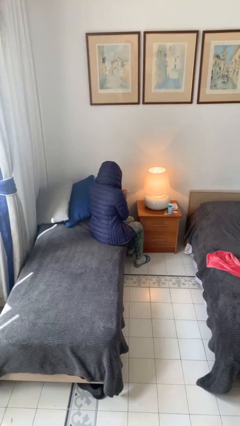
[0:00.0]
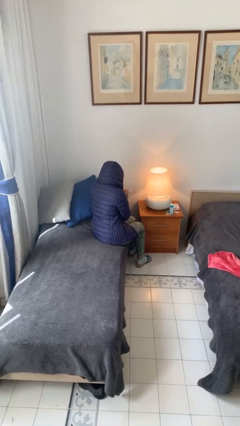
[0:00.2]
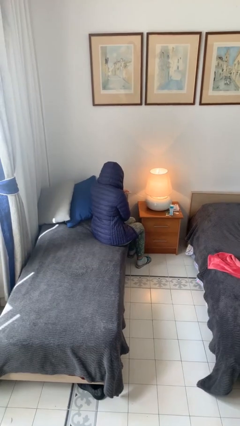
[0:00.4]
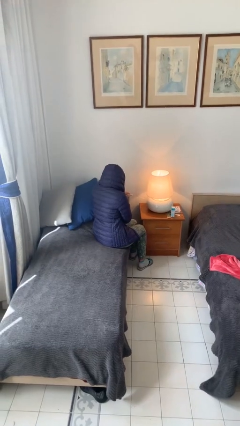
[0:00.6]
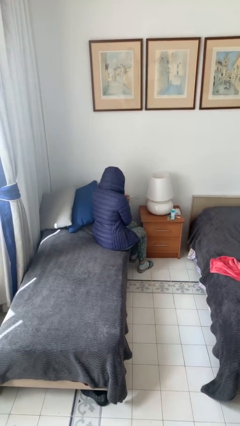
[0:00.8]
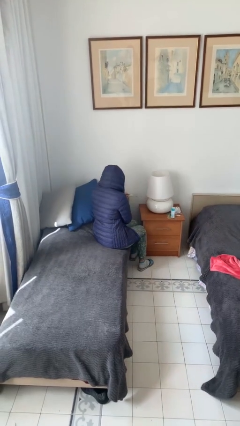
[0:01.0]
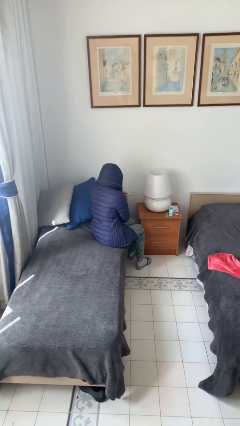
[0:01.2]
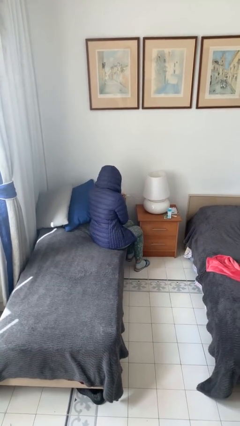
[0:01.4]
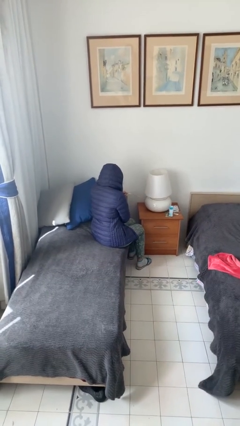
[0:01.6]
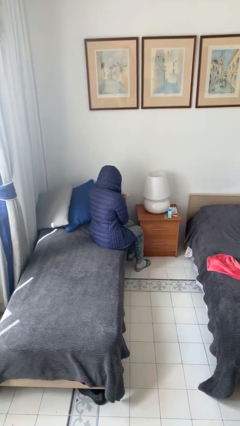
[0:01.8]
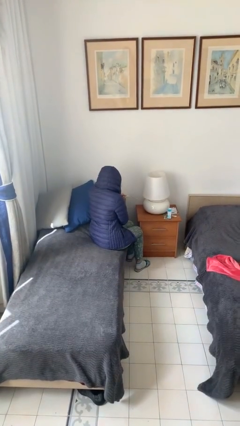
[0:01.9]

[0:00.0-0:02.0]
person turns off lamp

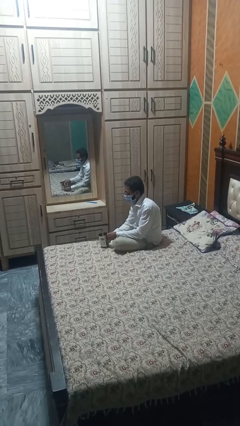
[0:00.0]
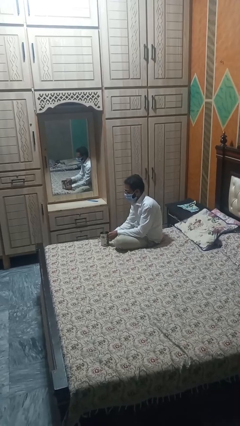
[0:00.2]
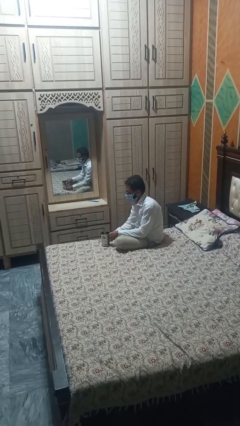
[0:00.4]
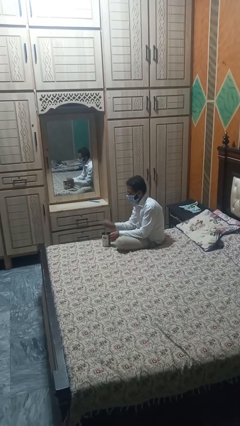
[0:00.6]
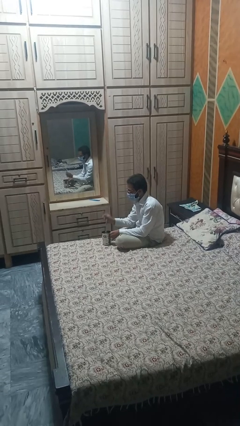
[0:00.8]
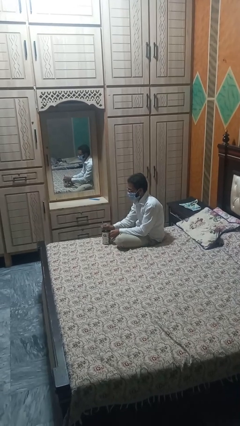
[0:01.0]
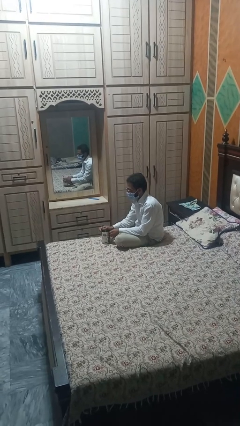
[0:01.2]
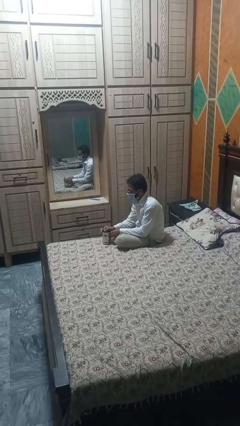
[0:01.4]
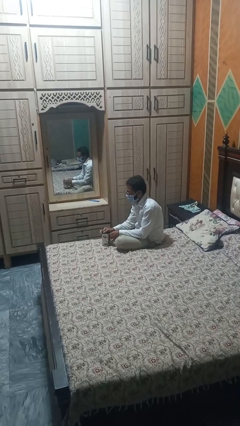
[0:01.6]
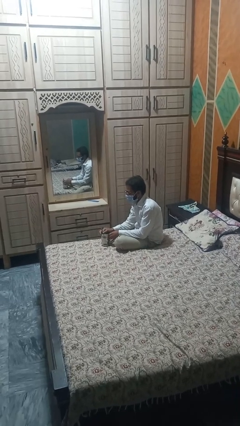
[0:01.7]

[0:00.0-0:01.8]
person stirs mug

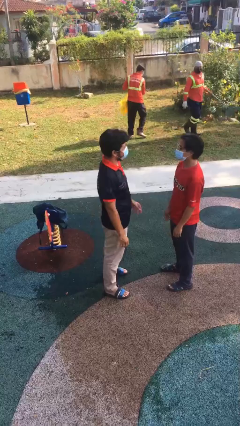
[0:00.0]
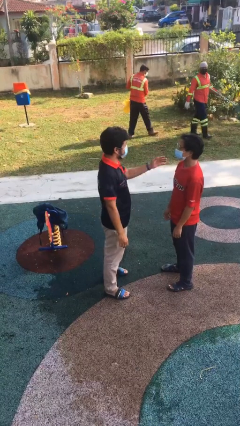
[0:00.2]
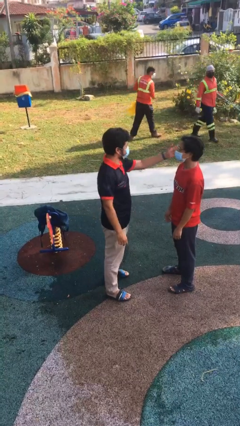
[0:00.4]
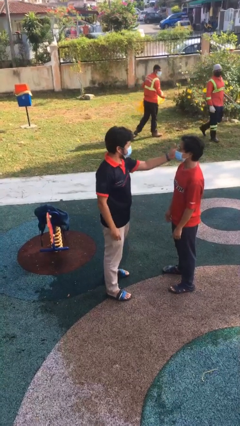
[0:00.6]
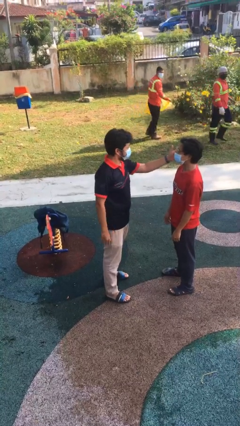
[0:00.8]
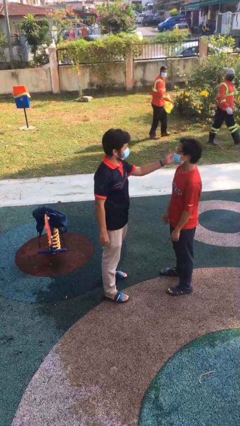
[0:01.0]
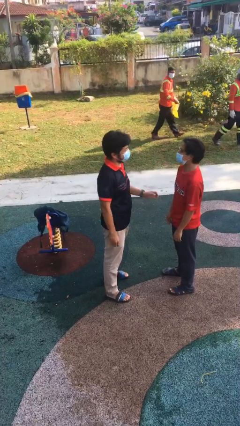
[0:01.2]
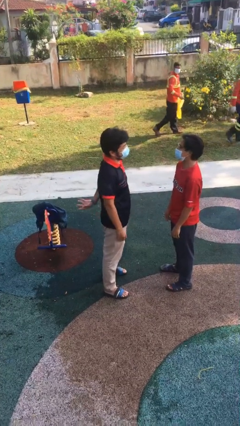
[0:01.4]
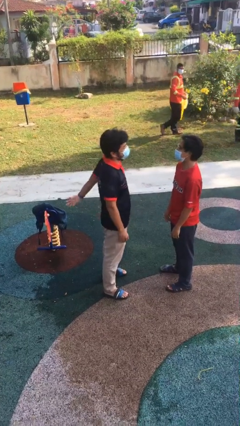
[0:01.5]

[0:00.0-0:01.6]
person touches face of person

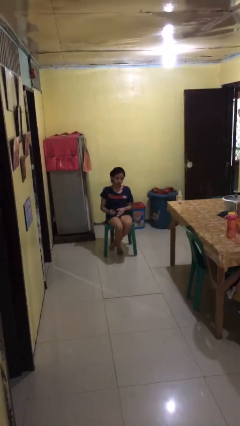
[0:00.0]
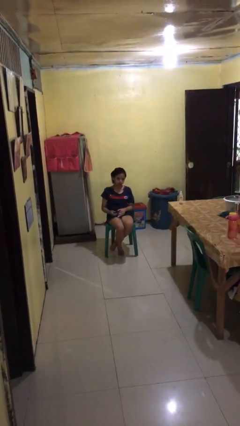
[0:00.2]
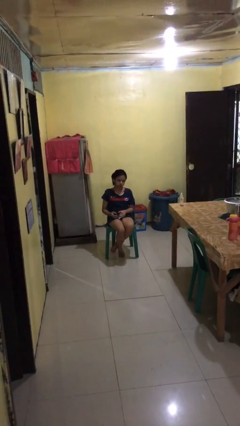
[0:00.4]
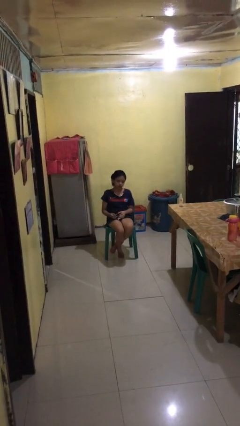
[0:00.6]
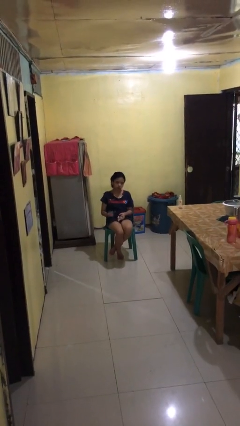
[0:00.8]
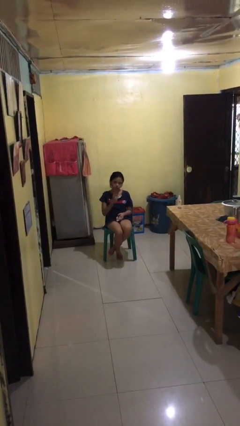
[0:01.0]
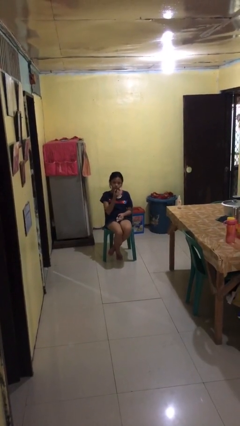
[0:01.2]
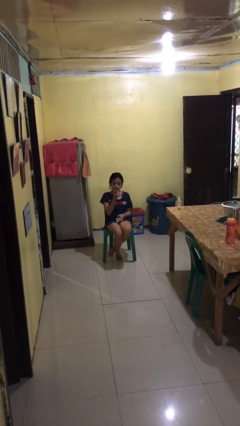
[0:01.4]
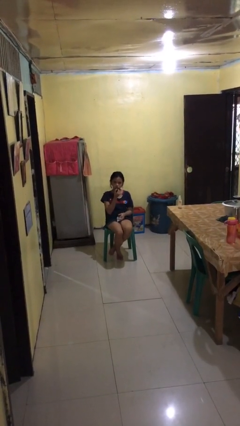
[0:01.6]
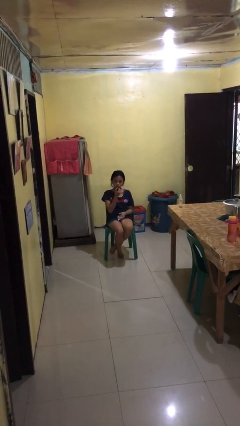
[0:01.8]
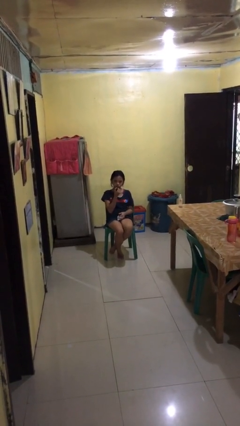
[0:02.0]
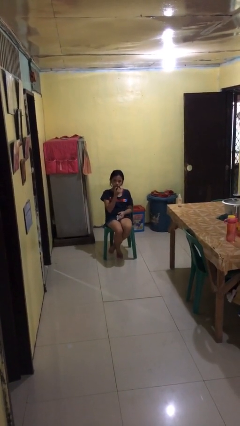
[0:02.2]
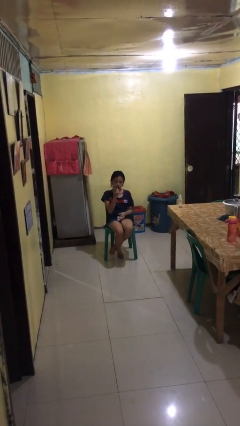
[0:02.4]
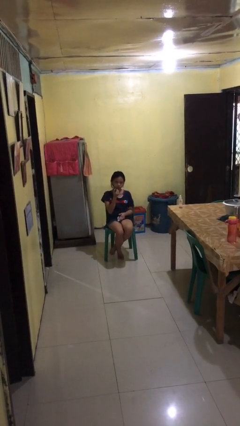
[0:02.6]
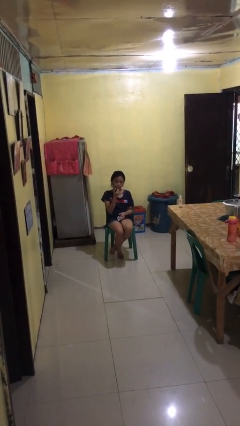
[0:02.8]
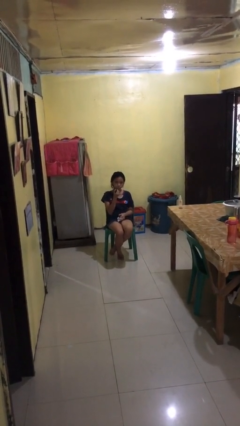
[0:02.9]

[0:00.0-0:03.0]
person applies lip makeup

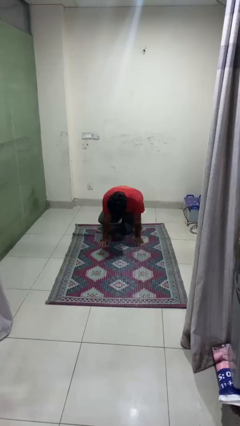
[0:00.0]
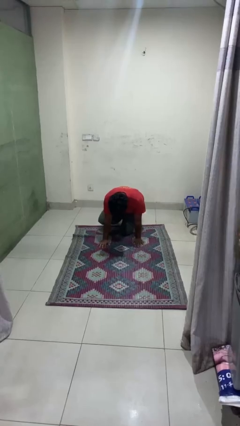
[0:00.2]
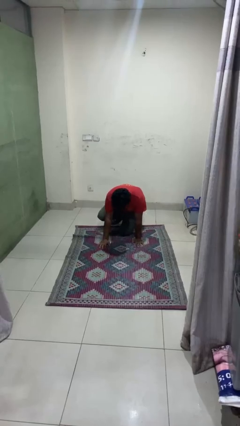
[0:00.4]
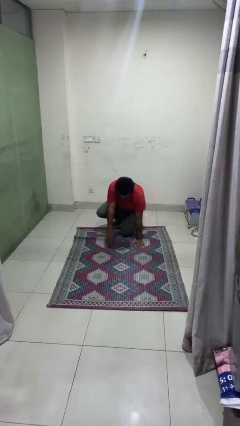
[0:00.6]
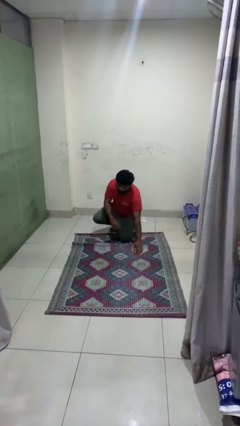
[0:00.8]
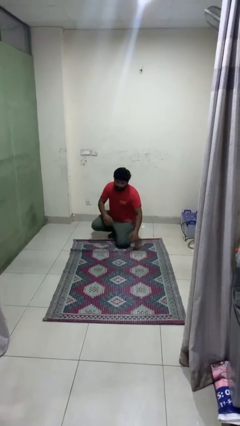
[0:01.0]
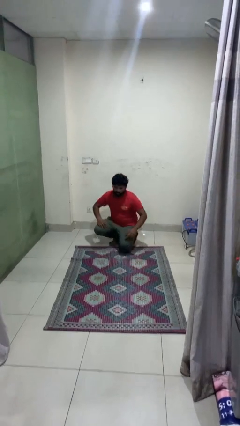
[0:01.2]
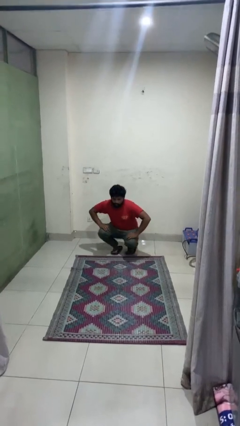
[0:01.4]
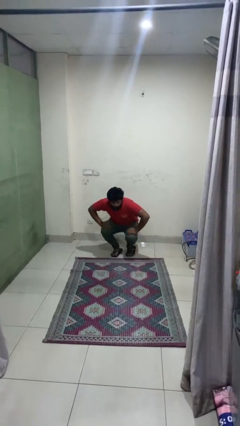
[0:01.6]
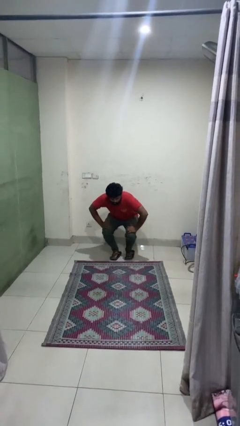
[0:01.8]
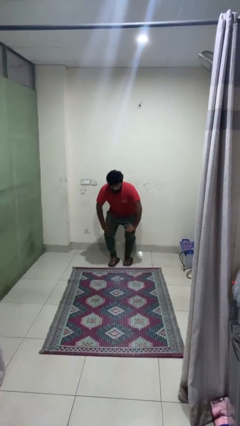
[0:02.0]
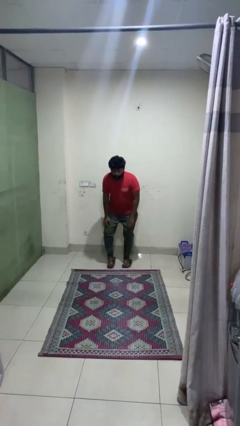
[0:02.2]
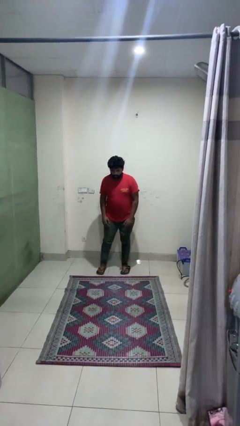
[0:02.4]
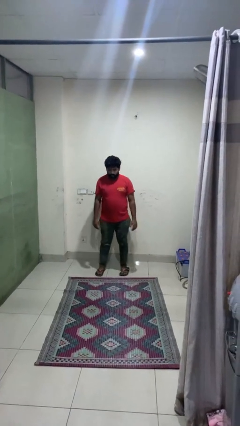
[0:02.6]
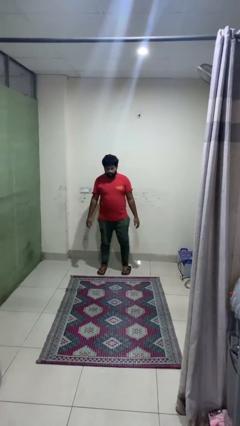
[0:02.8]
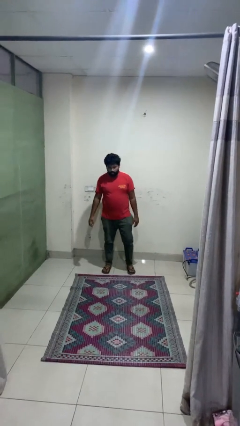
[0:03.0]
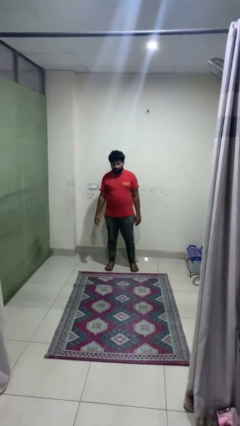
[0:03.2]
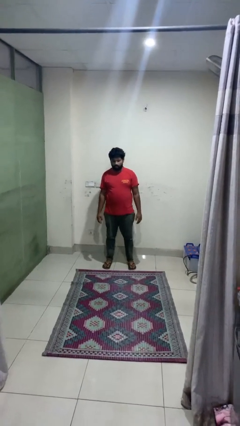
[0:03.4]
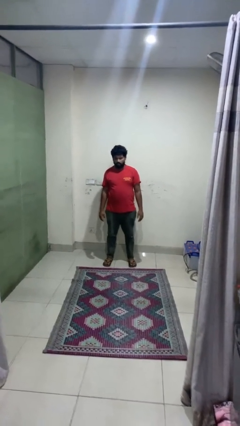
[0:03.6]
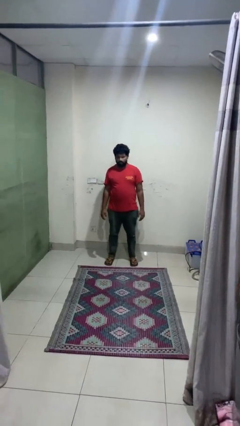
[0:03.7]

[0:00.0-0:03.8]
person stands up from floor

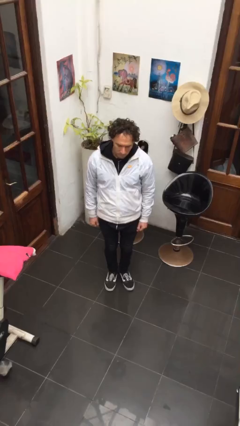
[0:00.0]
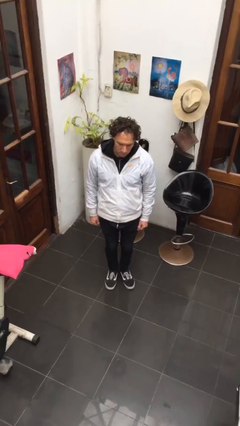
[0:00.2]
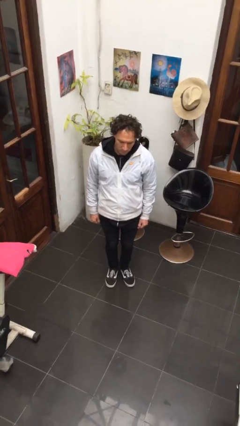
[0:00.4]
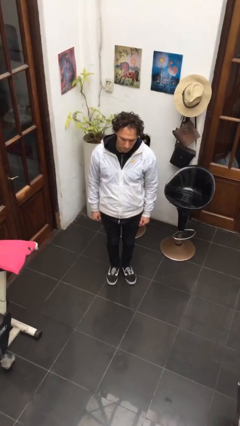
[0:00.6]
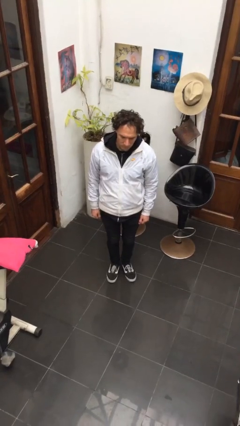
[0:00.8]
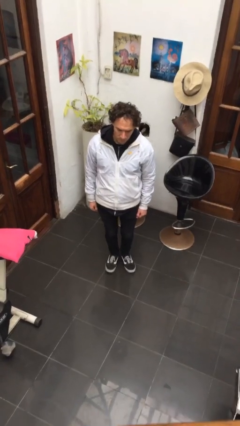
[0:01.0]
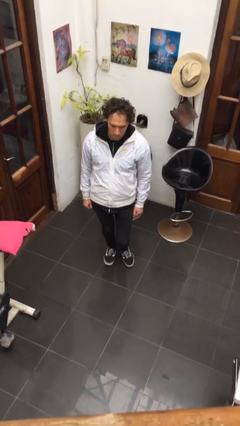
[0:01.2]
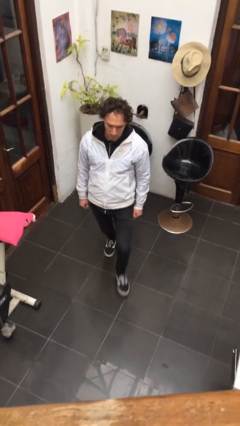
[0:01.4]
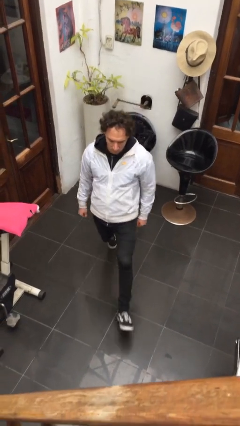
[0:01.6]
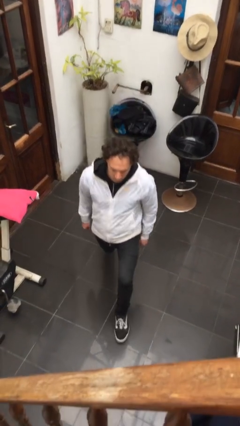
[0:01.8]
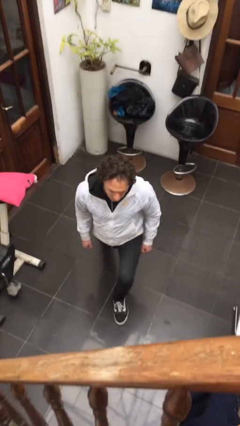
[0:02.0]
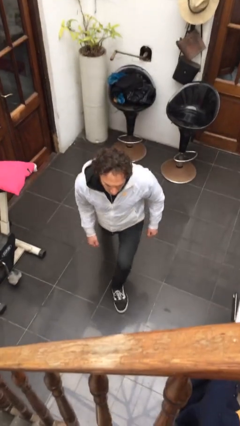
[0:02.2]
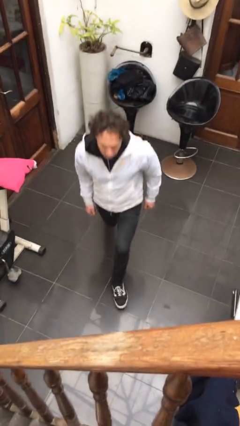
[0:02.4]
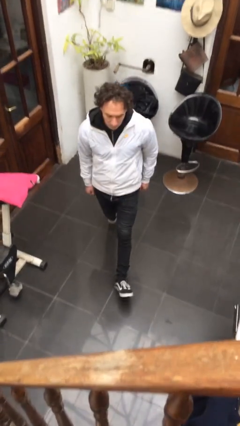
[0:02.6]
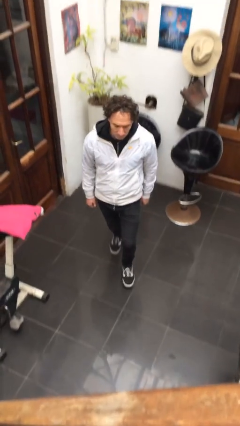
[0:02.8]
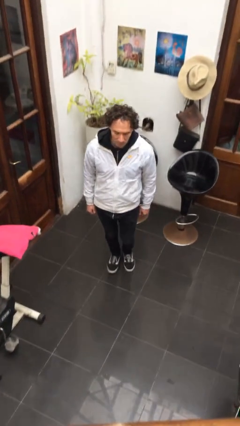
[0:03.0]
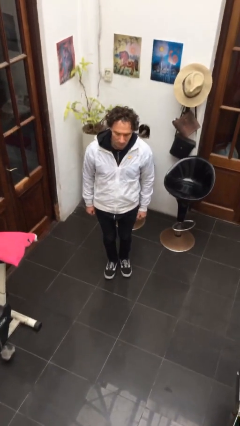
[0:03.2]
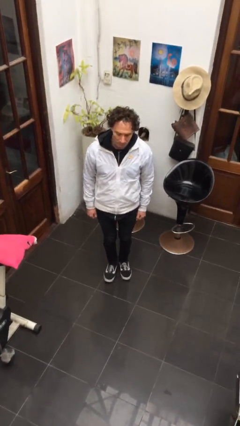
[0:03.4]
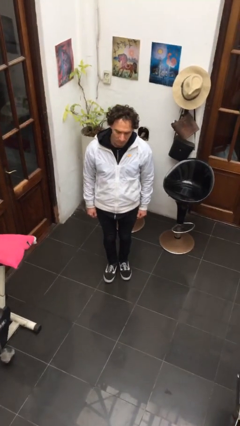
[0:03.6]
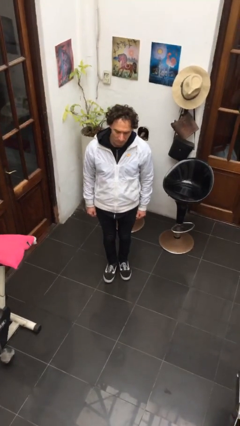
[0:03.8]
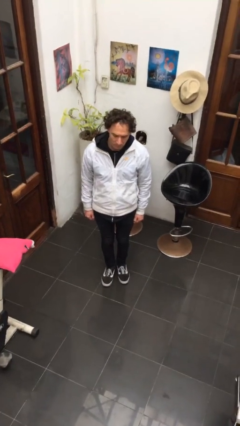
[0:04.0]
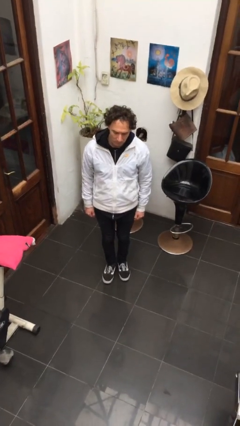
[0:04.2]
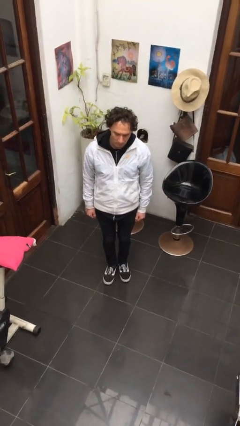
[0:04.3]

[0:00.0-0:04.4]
person exercises with lunges

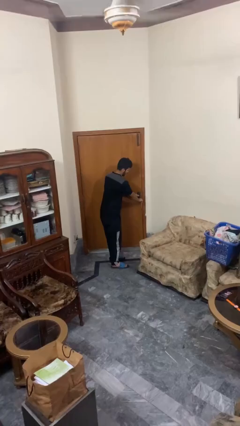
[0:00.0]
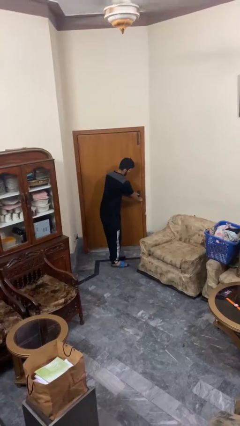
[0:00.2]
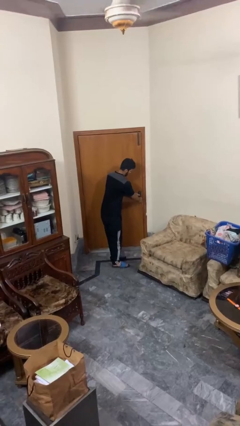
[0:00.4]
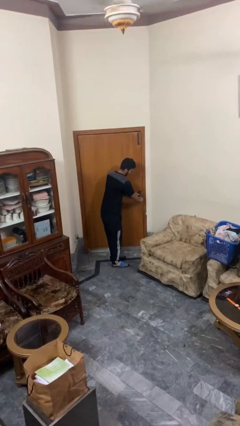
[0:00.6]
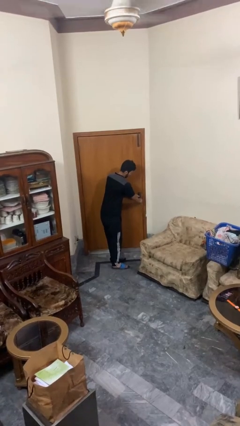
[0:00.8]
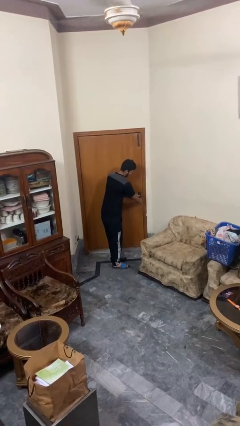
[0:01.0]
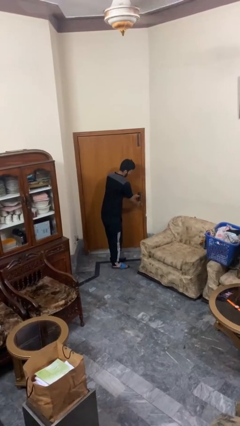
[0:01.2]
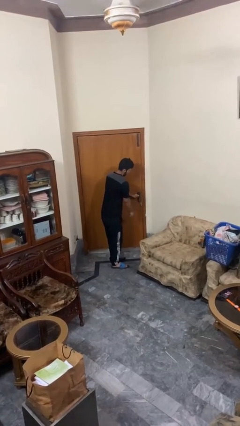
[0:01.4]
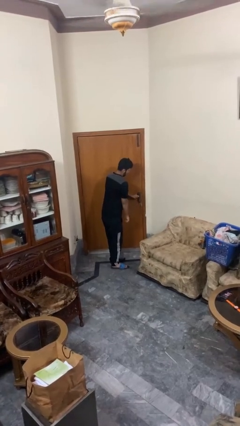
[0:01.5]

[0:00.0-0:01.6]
person locks door with keys
